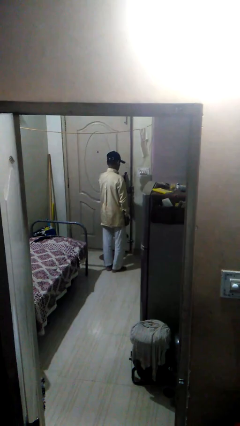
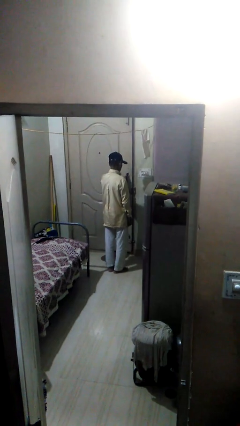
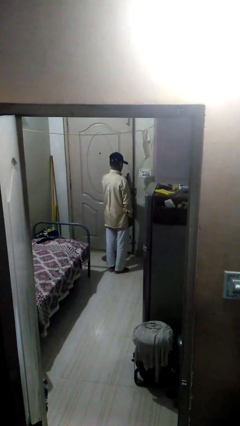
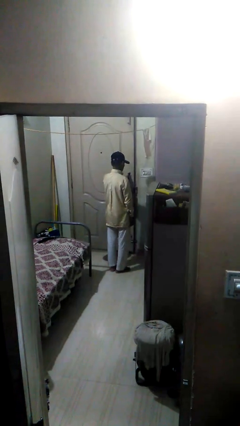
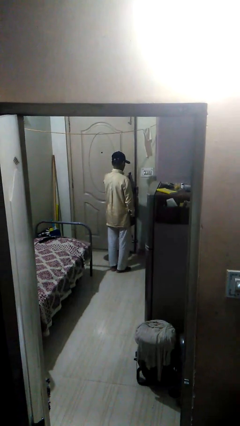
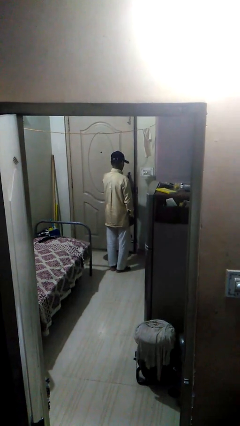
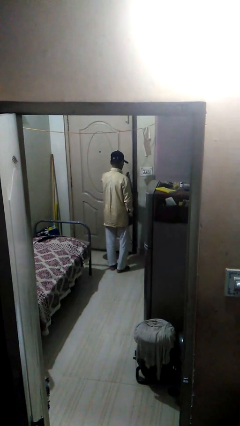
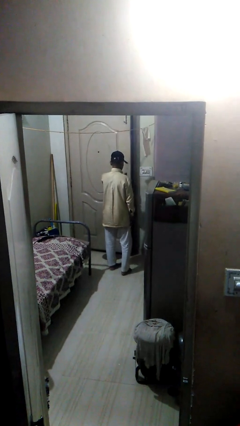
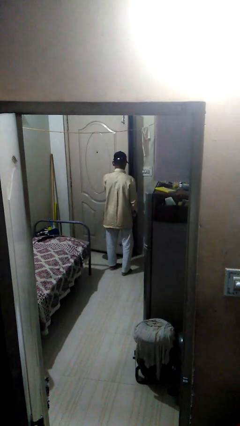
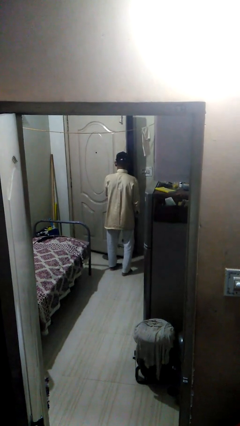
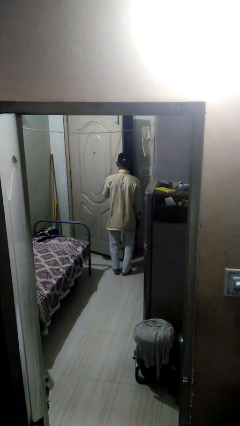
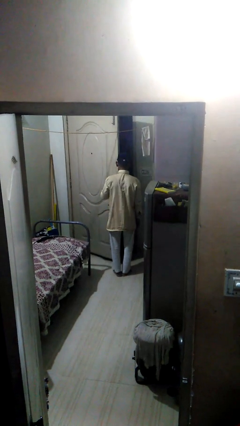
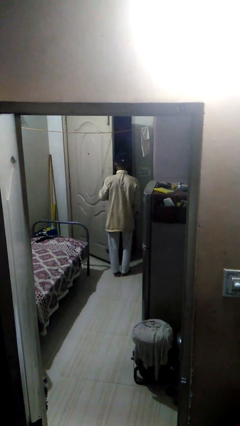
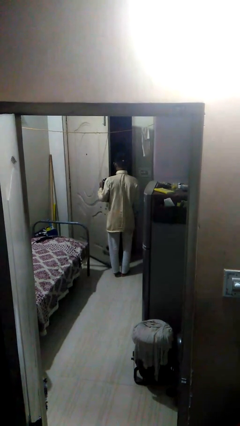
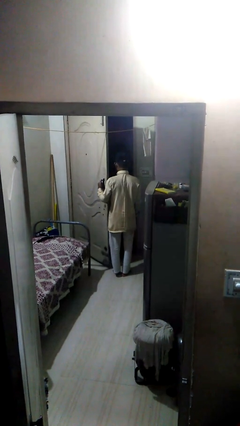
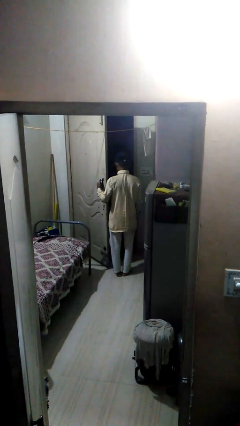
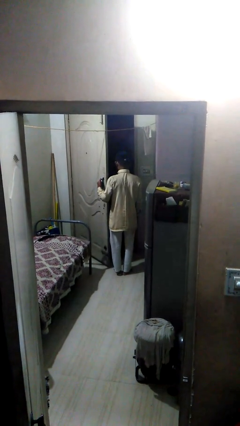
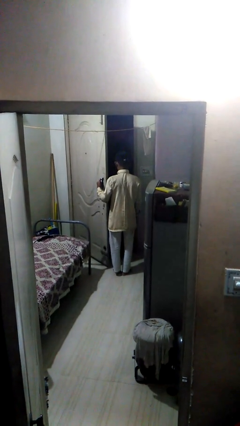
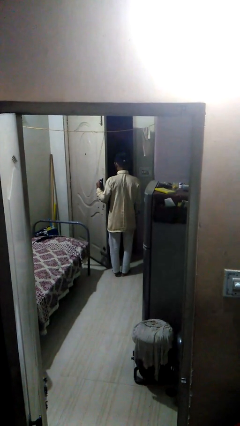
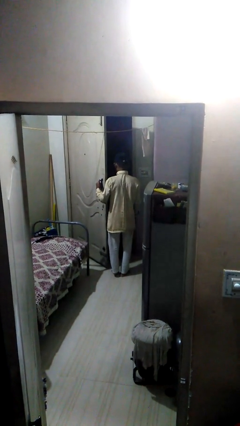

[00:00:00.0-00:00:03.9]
person opens facility door

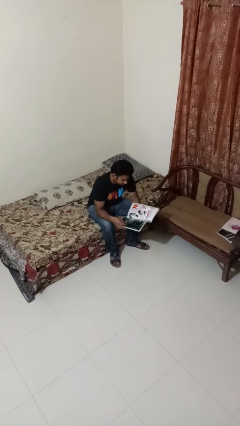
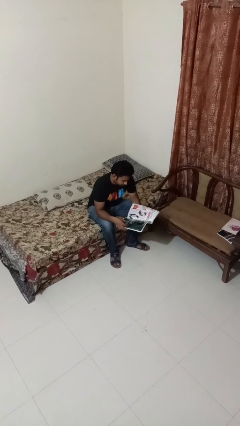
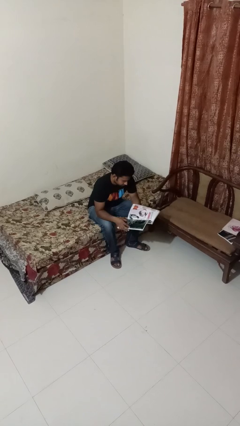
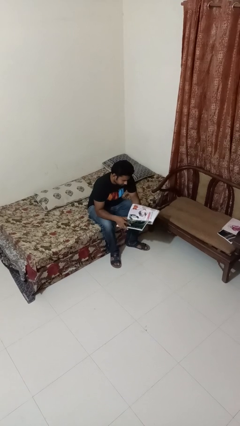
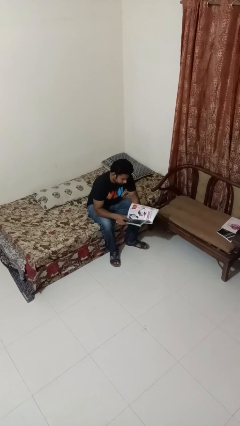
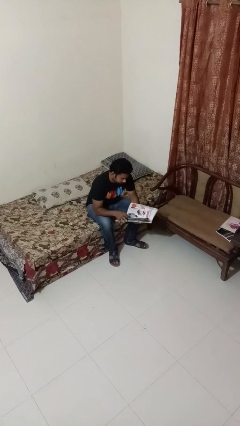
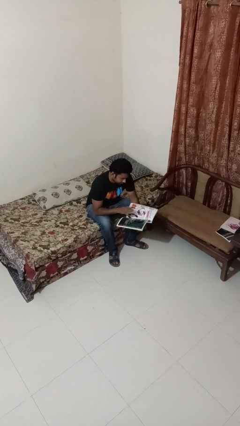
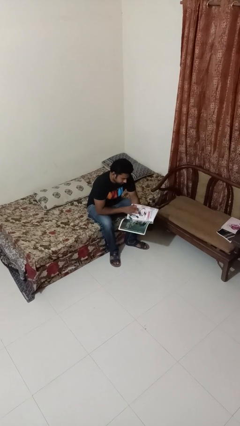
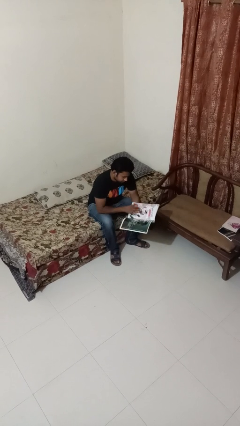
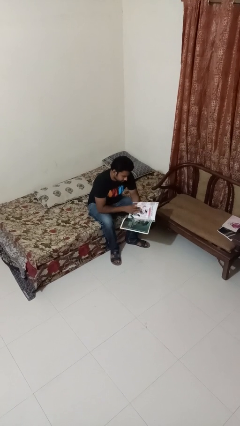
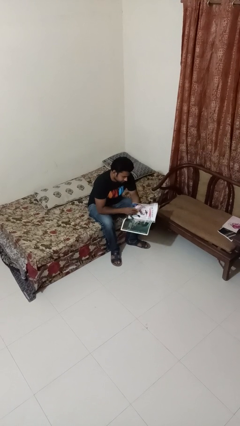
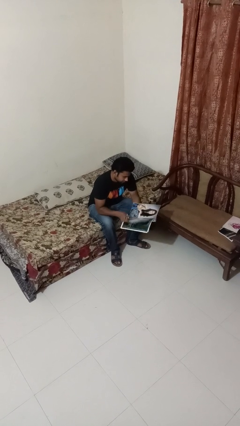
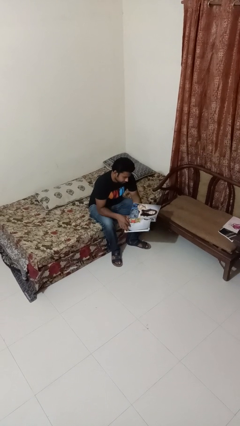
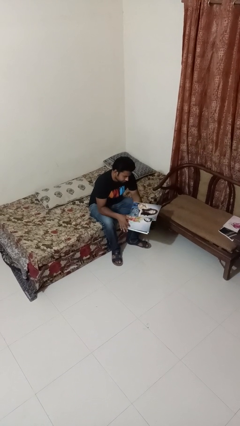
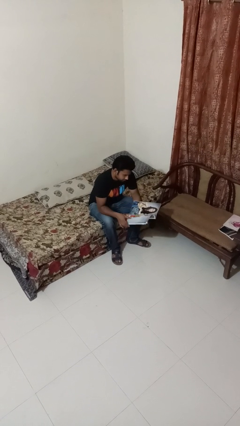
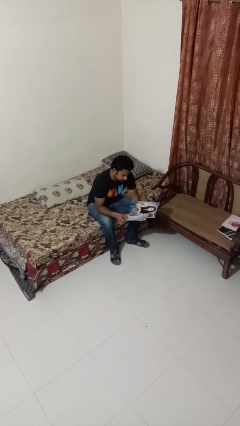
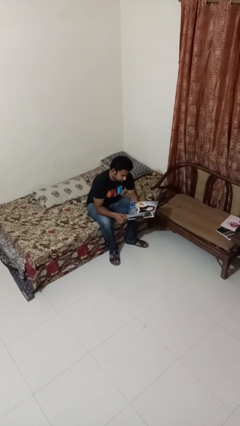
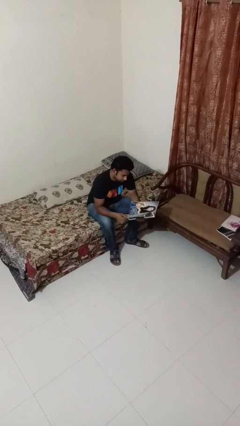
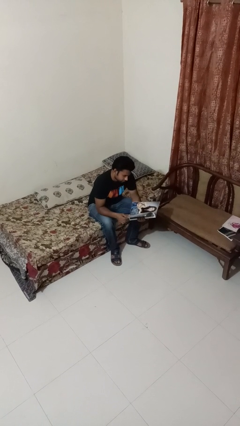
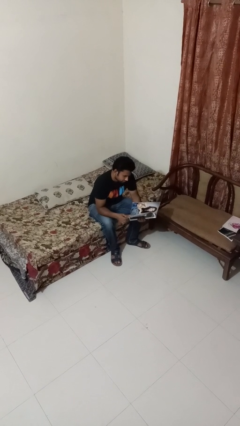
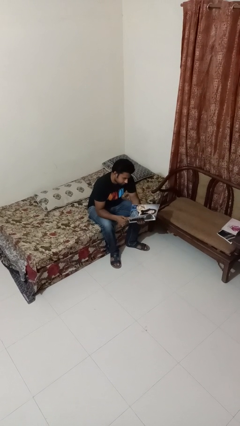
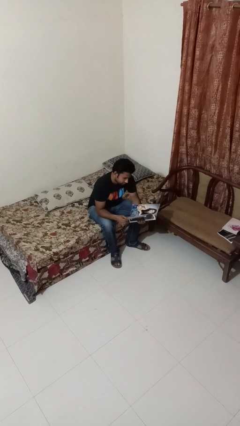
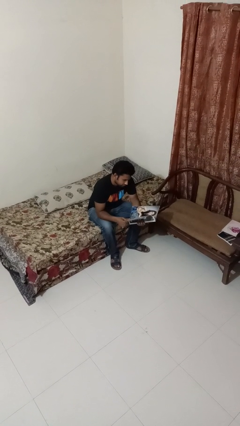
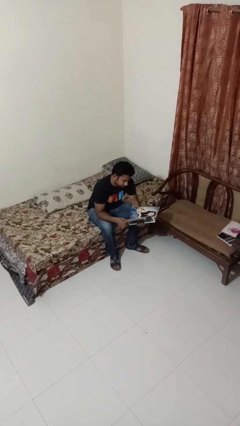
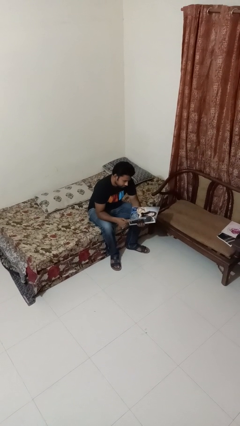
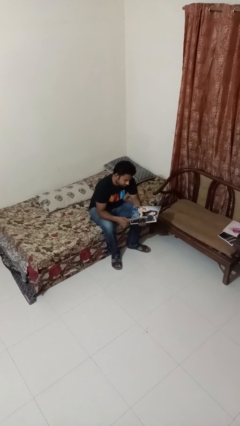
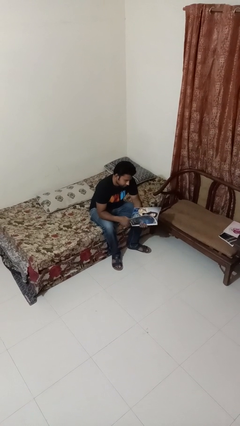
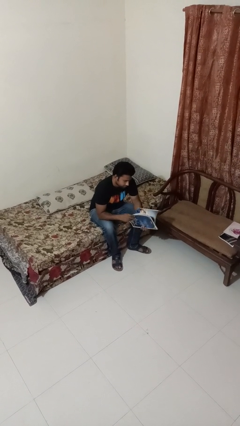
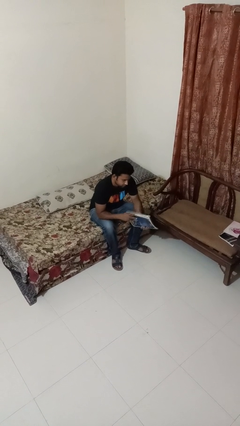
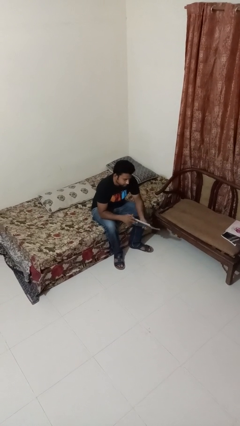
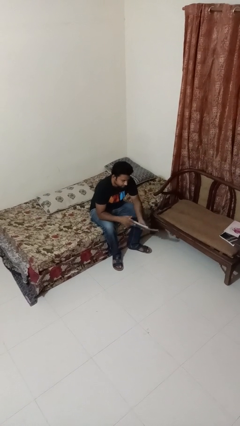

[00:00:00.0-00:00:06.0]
person reads magazine

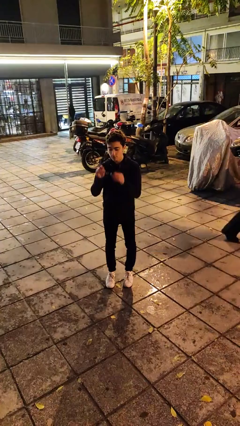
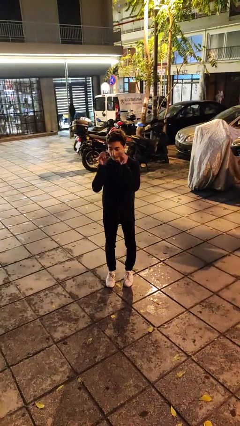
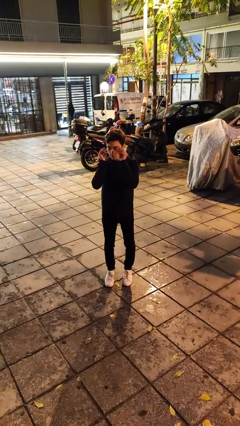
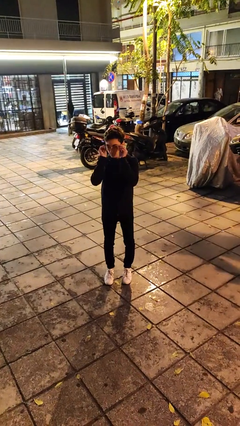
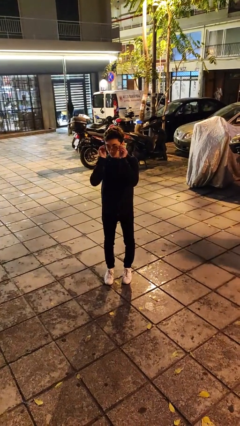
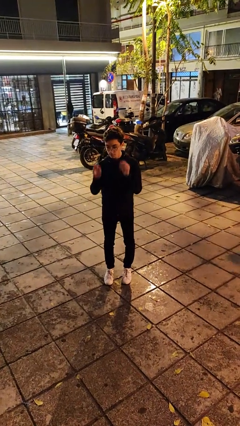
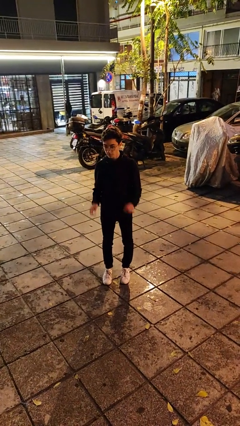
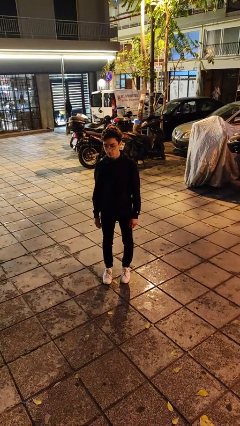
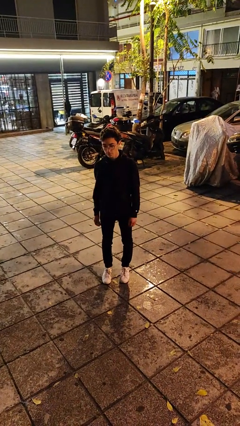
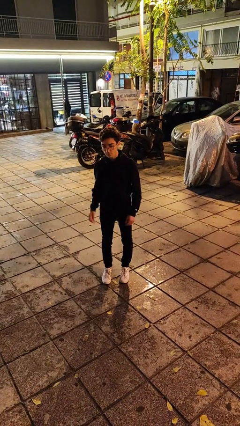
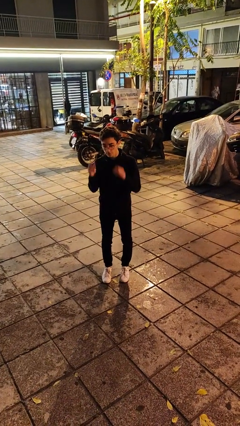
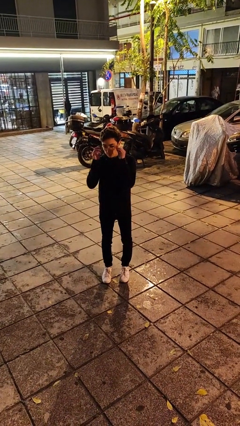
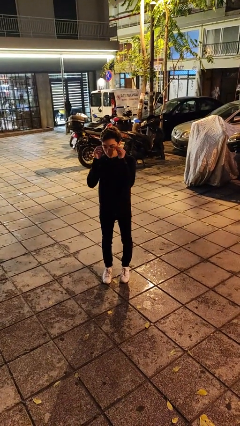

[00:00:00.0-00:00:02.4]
person puts on glasses

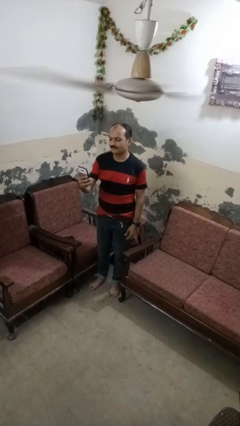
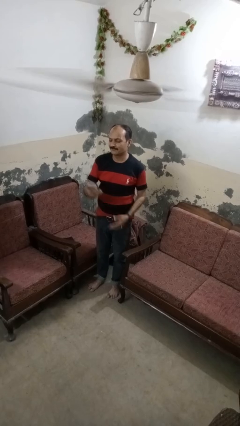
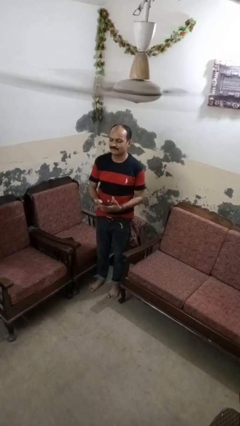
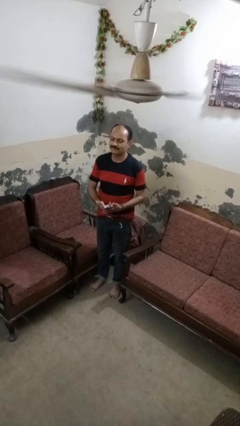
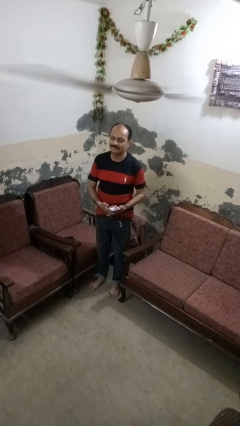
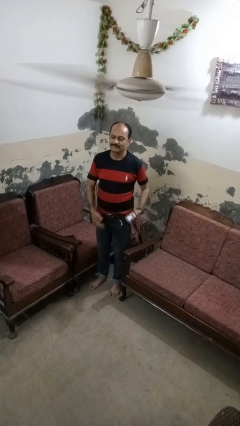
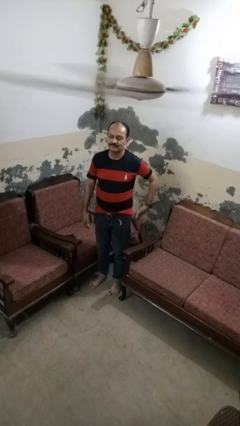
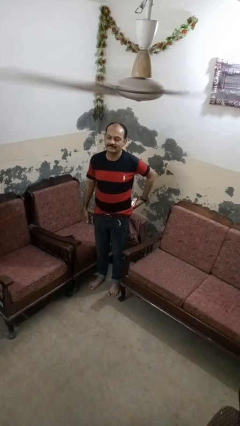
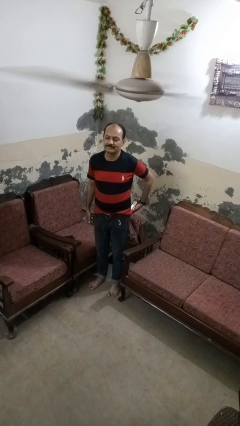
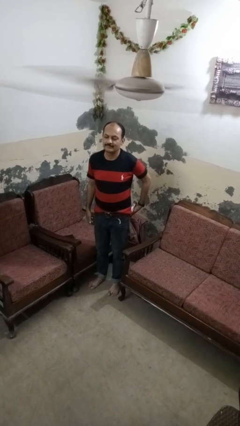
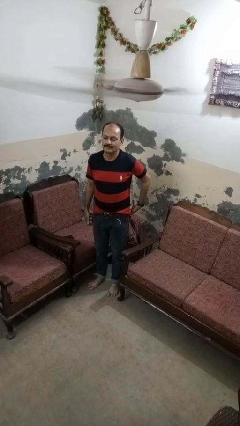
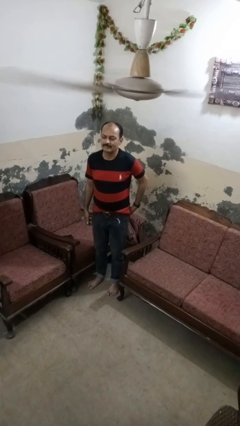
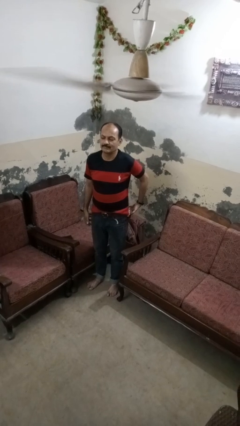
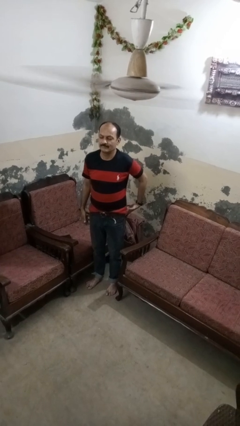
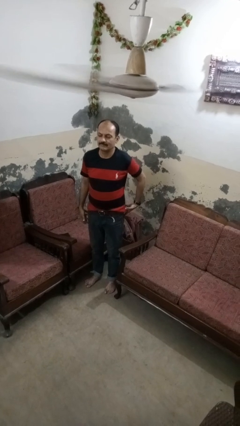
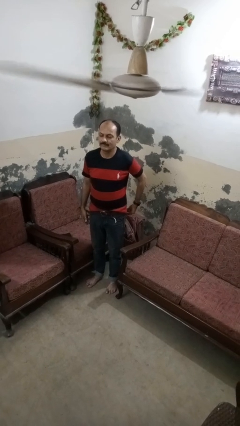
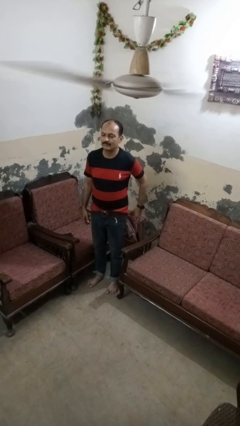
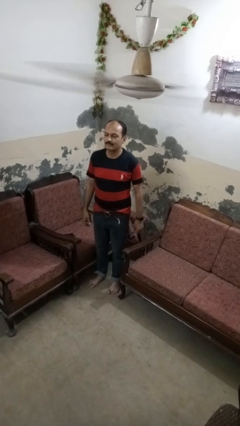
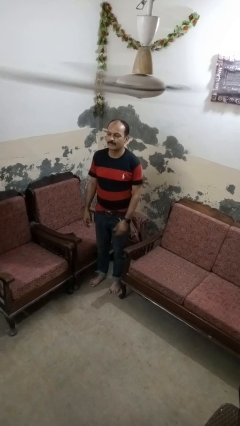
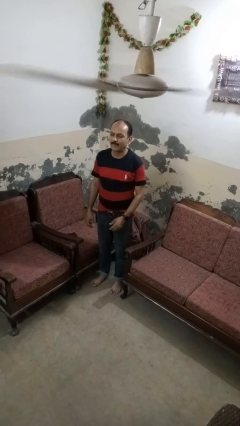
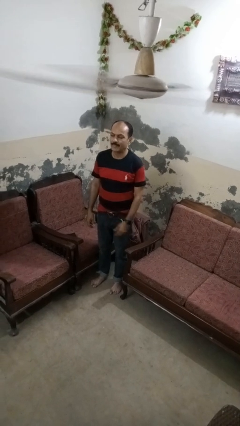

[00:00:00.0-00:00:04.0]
person puts phone into pocket

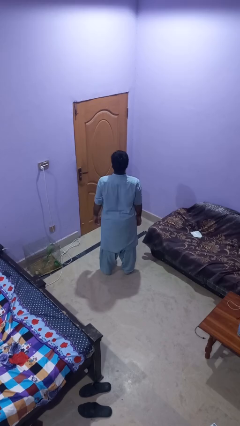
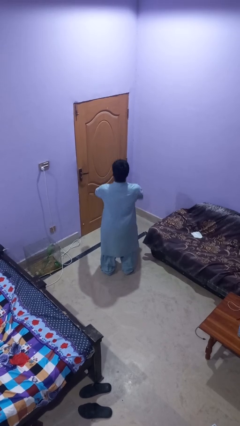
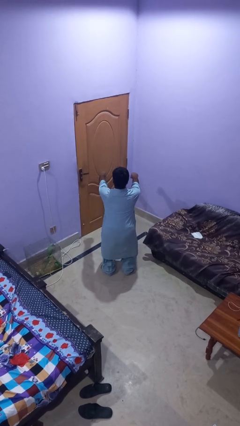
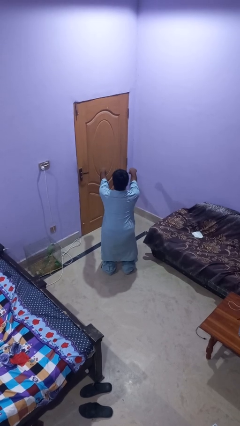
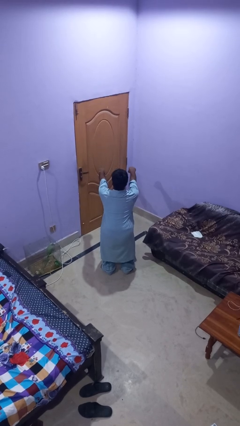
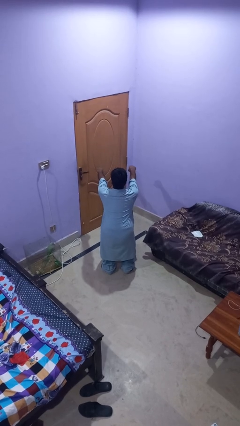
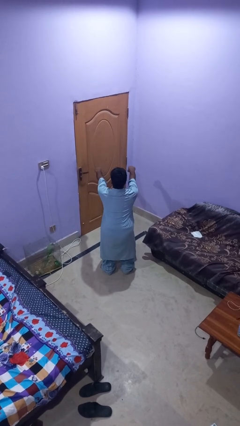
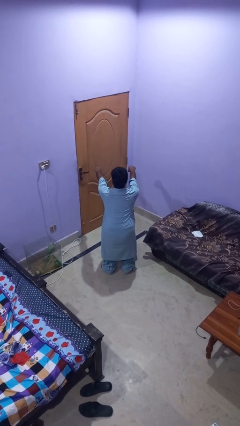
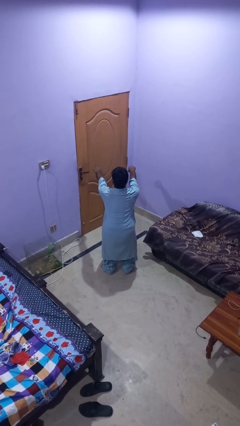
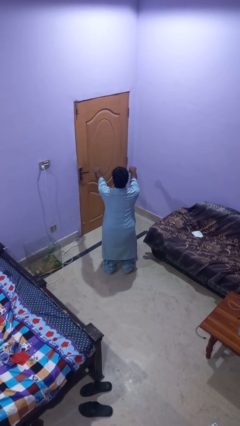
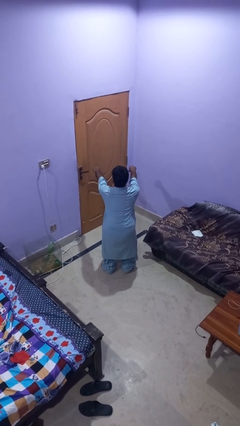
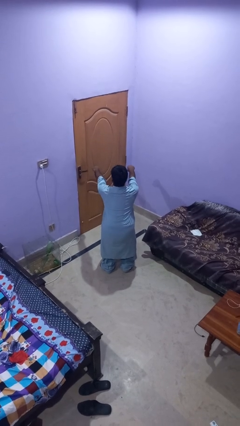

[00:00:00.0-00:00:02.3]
person squats
